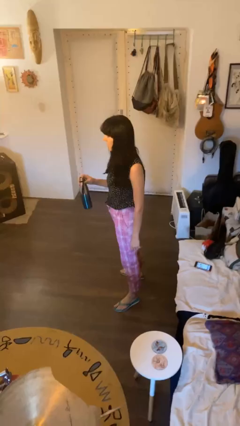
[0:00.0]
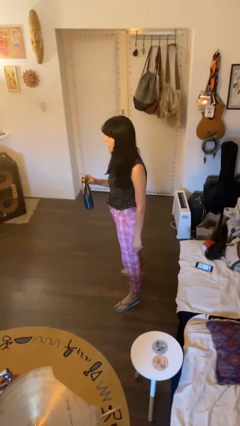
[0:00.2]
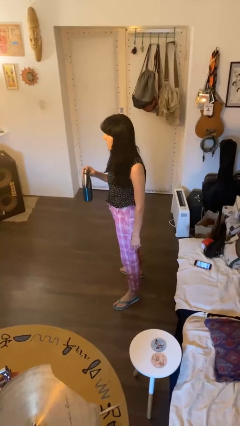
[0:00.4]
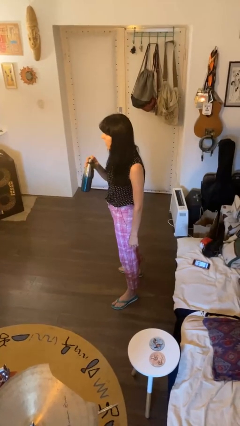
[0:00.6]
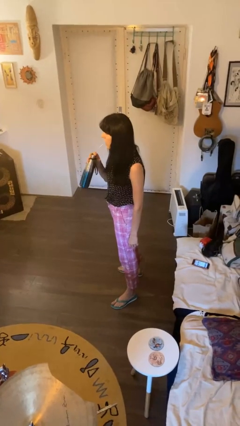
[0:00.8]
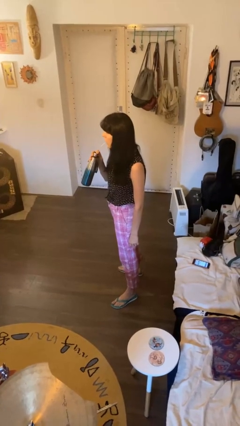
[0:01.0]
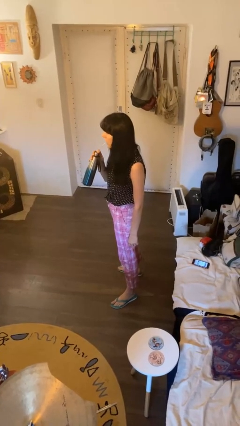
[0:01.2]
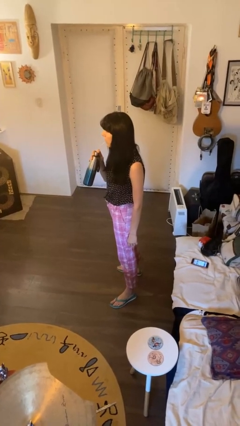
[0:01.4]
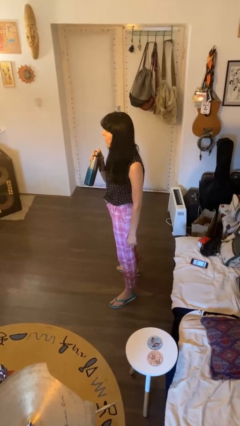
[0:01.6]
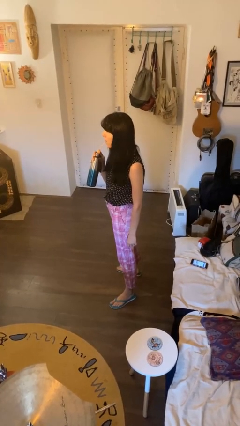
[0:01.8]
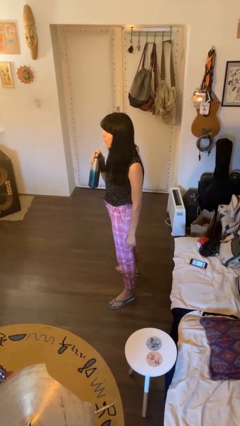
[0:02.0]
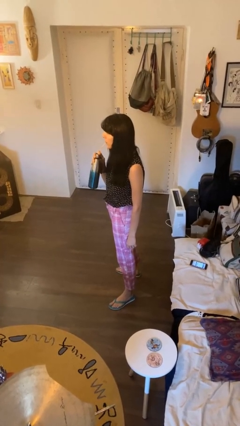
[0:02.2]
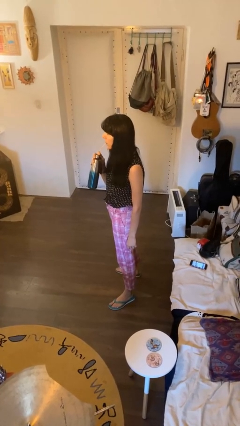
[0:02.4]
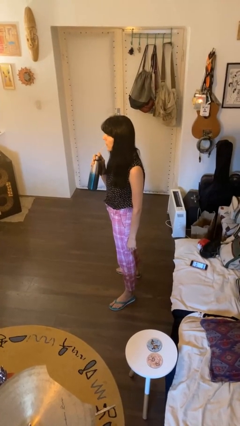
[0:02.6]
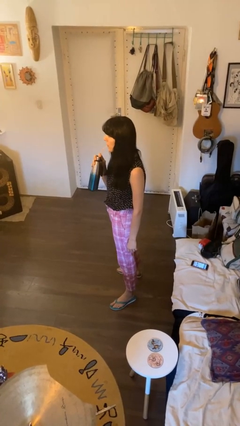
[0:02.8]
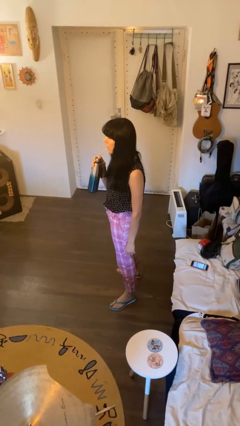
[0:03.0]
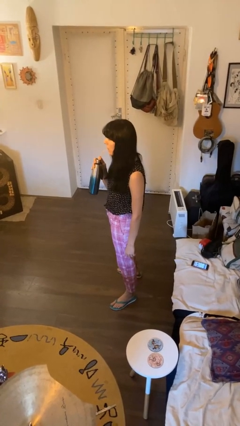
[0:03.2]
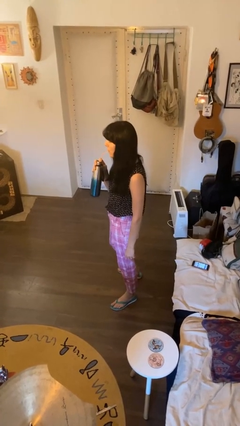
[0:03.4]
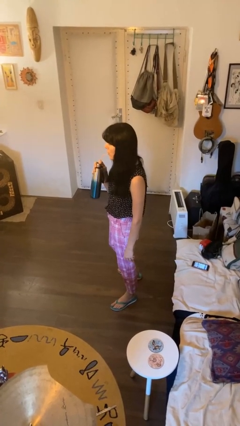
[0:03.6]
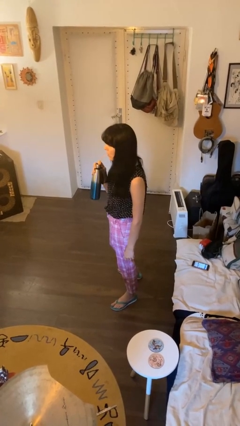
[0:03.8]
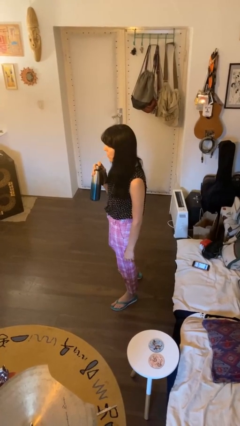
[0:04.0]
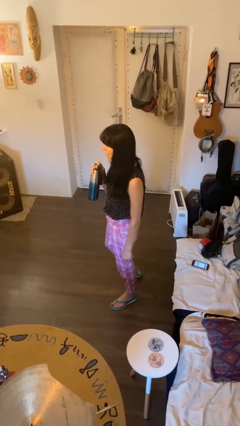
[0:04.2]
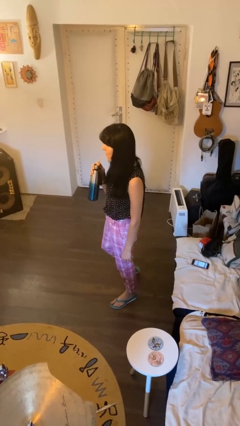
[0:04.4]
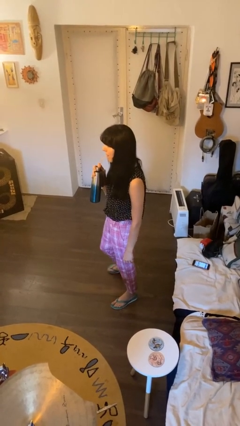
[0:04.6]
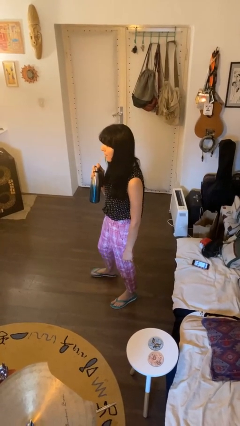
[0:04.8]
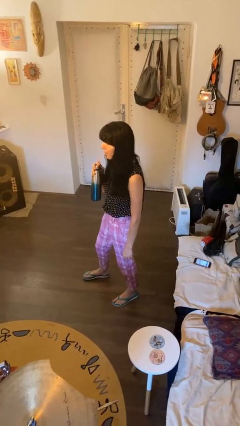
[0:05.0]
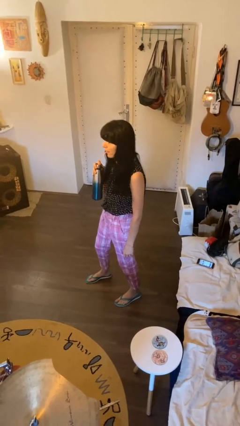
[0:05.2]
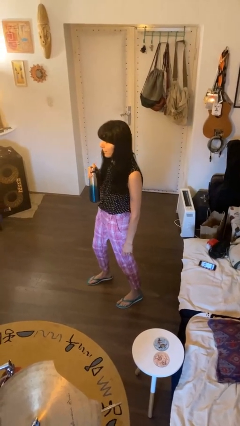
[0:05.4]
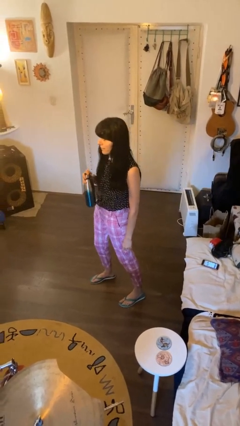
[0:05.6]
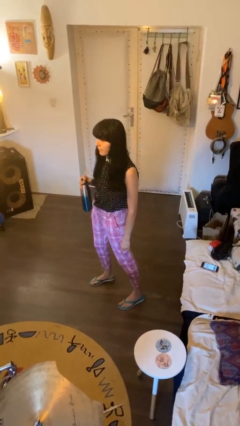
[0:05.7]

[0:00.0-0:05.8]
person drinks from straw

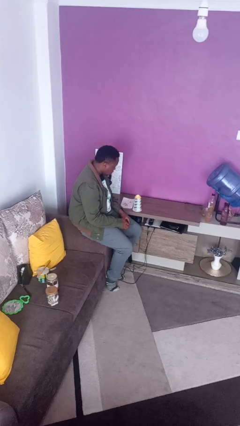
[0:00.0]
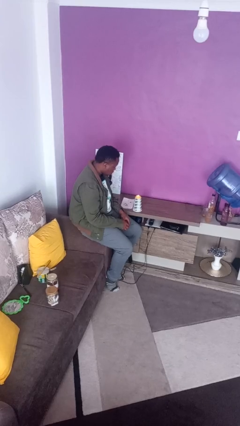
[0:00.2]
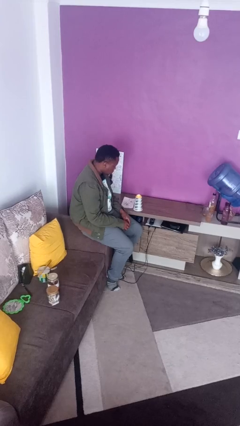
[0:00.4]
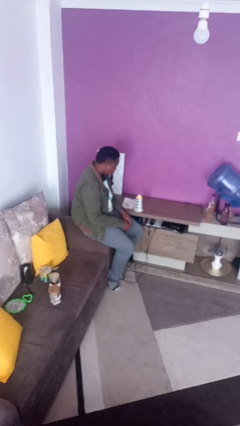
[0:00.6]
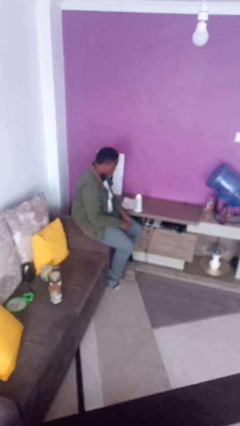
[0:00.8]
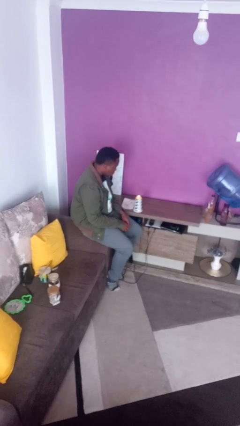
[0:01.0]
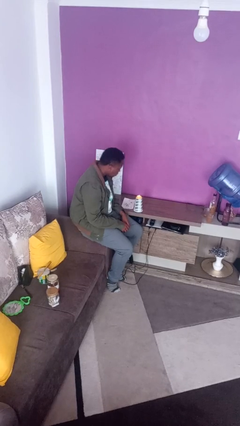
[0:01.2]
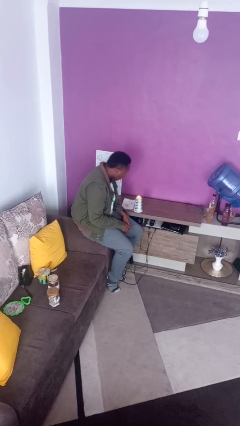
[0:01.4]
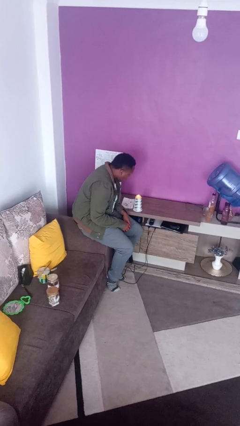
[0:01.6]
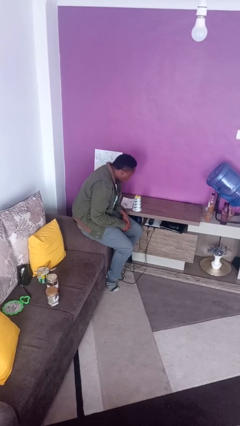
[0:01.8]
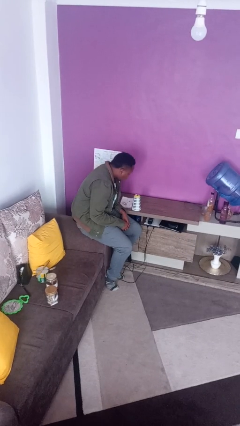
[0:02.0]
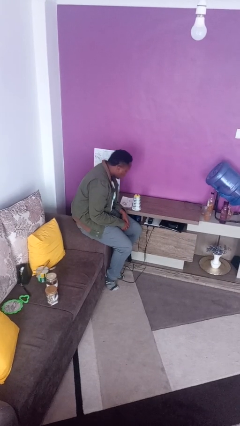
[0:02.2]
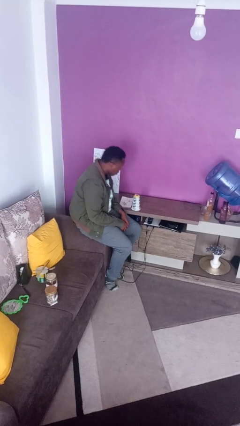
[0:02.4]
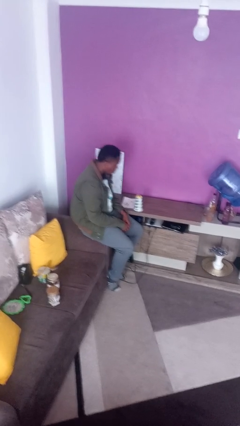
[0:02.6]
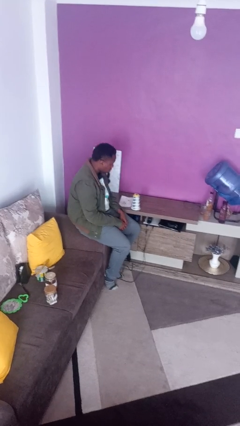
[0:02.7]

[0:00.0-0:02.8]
person extinguishes candle

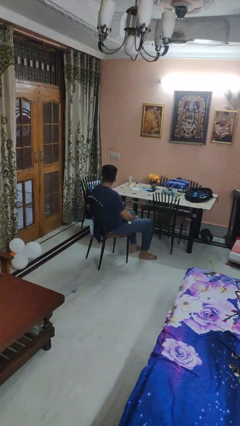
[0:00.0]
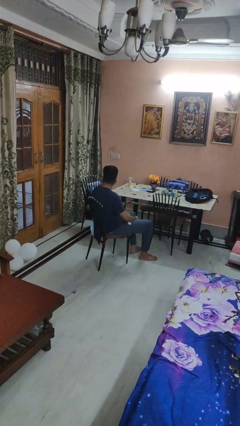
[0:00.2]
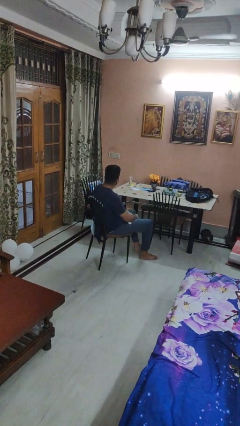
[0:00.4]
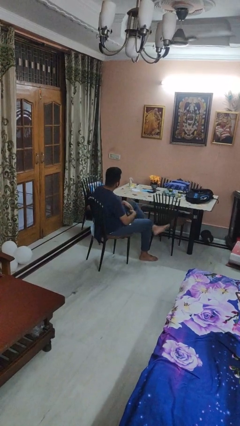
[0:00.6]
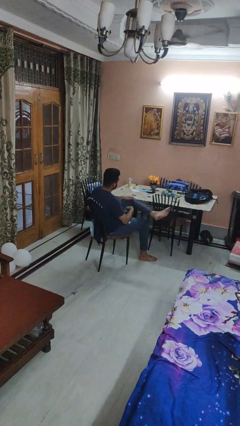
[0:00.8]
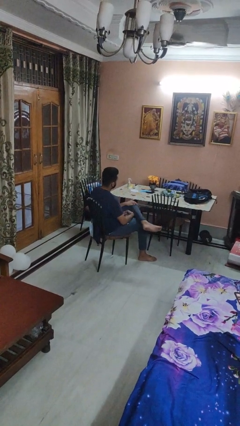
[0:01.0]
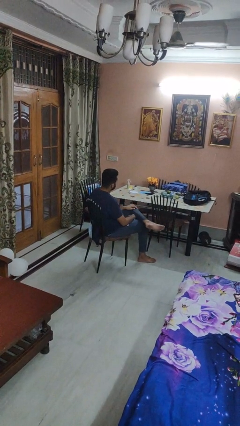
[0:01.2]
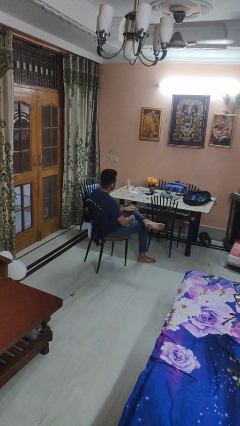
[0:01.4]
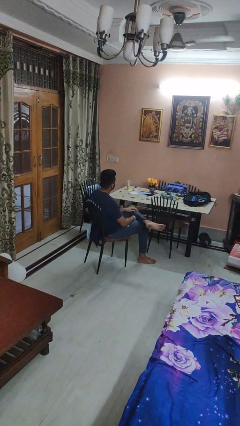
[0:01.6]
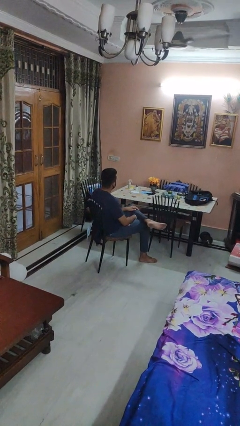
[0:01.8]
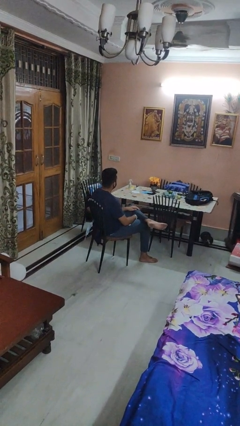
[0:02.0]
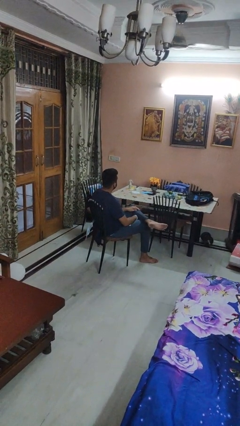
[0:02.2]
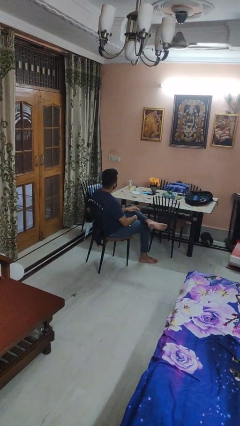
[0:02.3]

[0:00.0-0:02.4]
person crosses legs

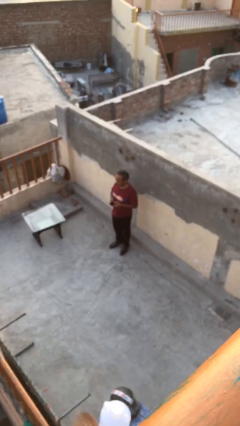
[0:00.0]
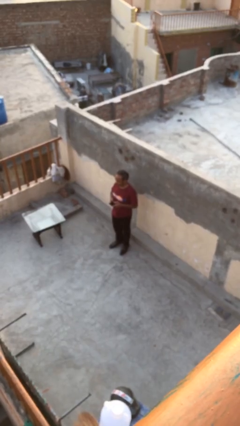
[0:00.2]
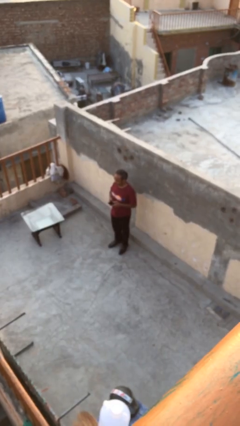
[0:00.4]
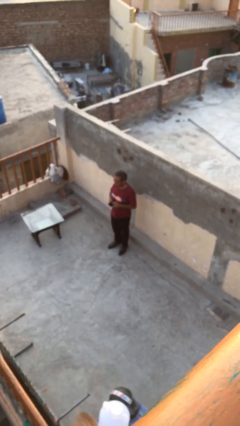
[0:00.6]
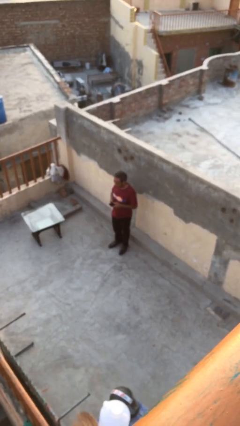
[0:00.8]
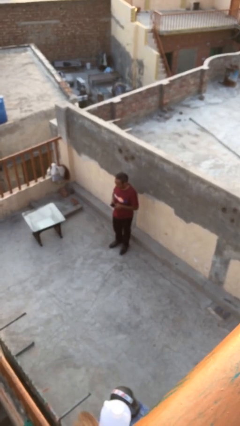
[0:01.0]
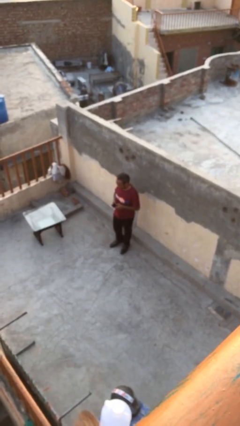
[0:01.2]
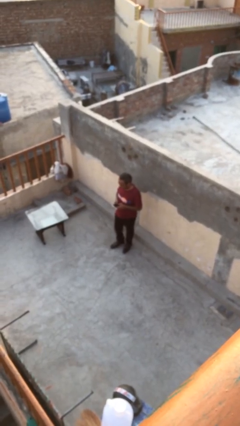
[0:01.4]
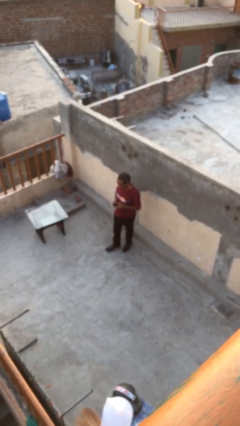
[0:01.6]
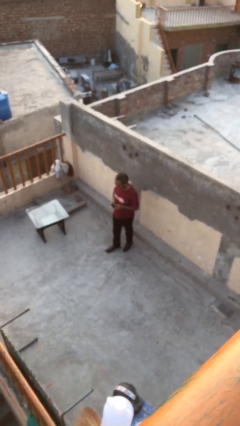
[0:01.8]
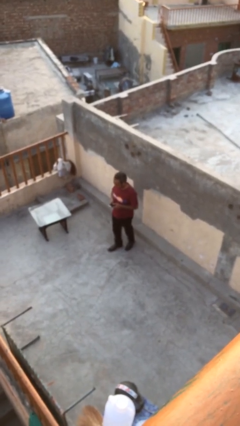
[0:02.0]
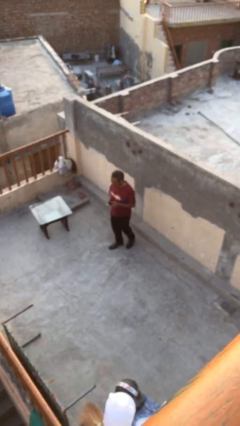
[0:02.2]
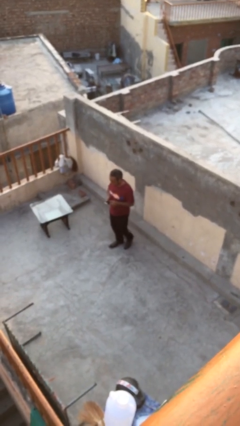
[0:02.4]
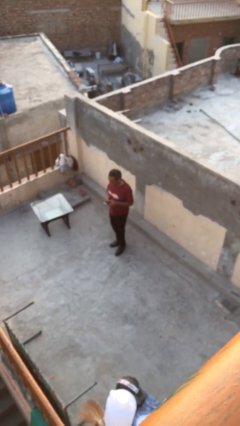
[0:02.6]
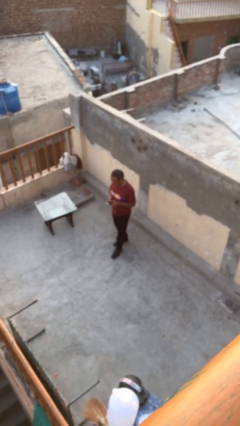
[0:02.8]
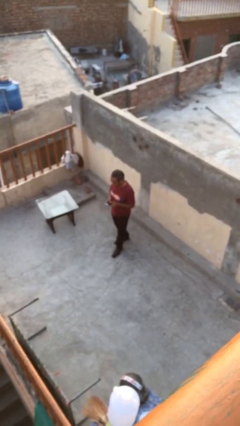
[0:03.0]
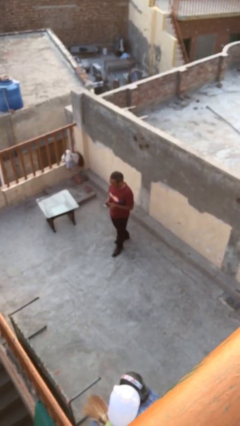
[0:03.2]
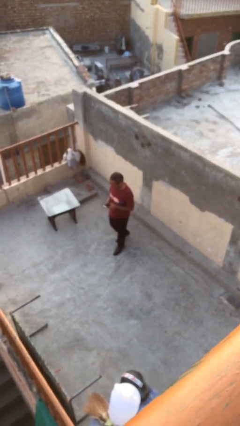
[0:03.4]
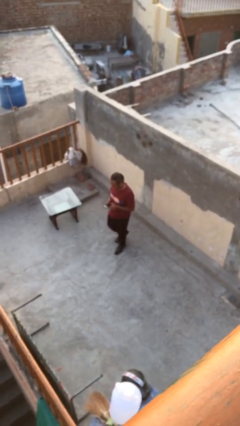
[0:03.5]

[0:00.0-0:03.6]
person texts on phone

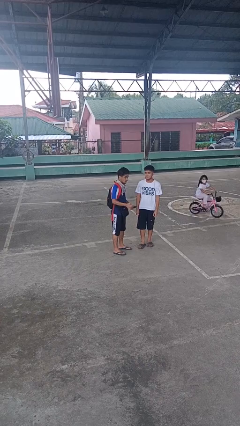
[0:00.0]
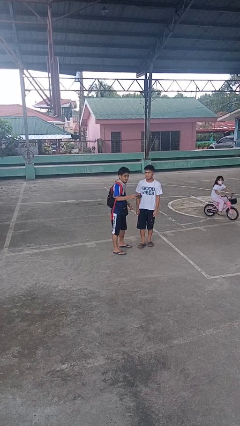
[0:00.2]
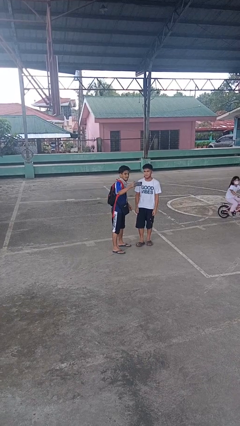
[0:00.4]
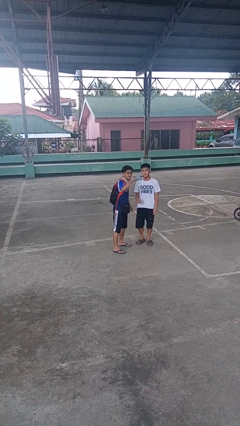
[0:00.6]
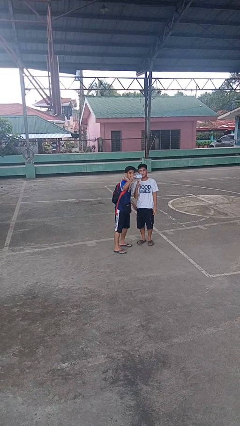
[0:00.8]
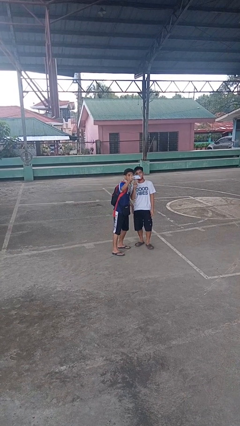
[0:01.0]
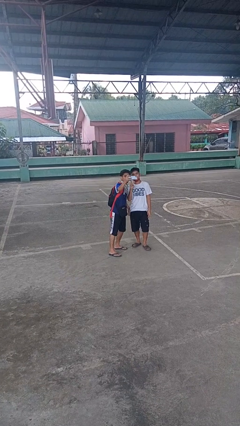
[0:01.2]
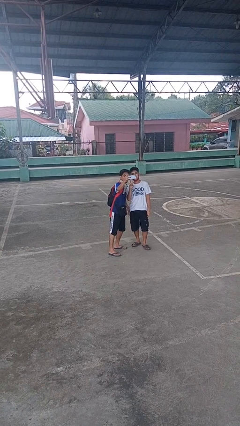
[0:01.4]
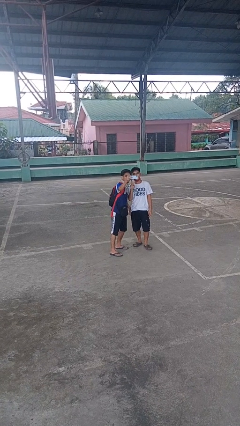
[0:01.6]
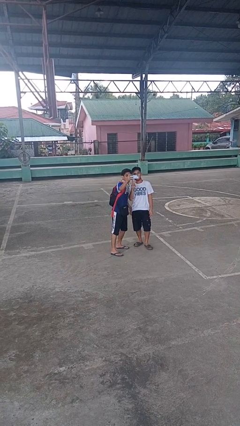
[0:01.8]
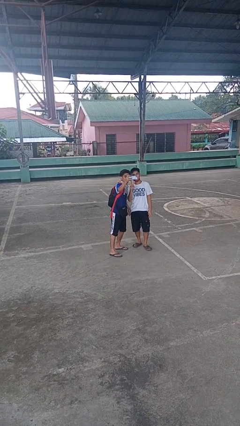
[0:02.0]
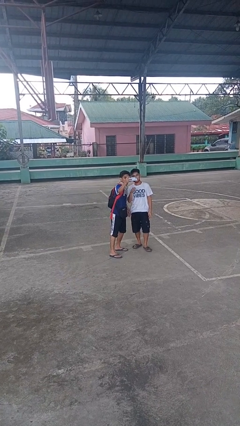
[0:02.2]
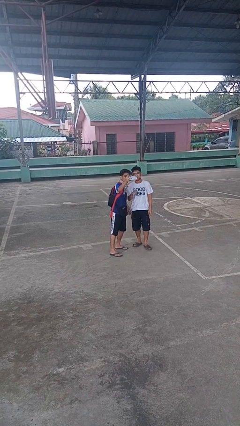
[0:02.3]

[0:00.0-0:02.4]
person takes selfie with person

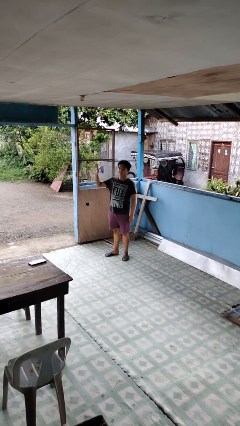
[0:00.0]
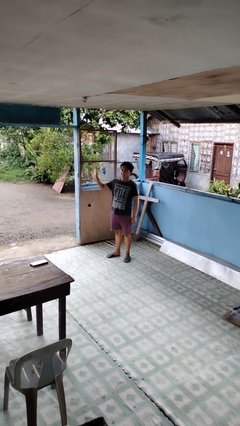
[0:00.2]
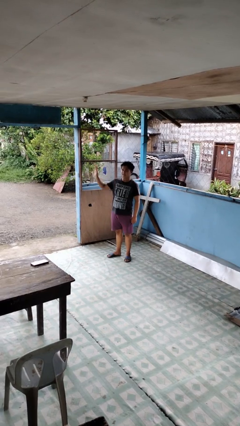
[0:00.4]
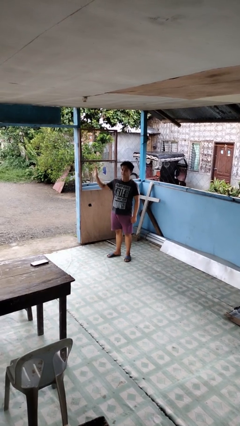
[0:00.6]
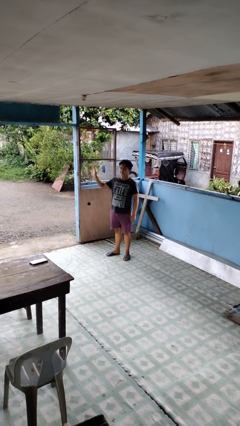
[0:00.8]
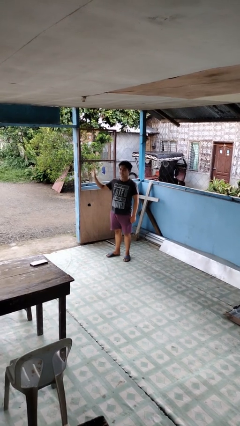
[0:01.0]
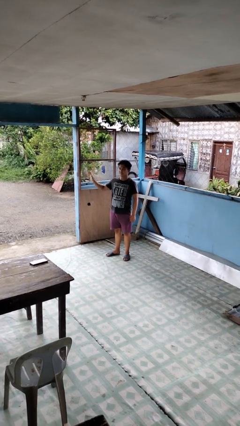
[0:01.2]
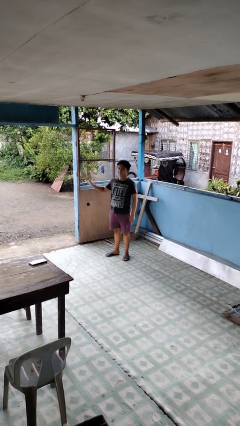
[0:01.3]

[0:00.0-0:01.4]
person gestures swipe right
